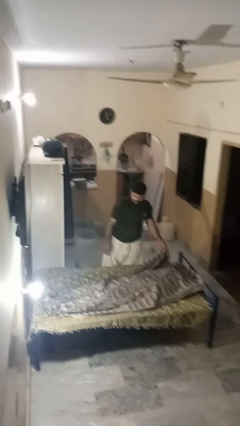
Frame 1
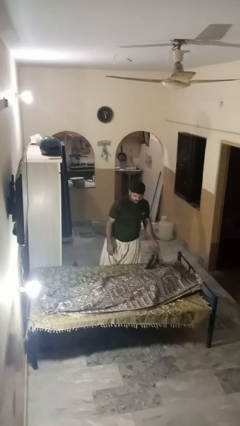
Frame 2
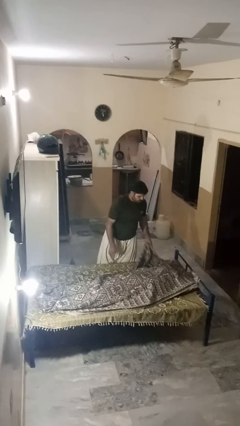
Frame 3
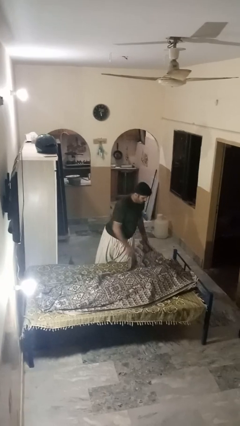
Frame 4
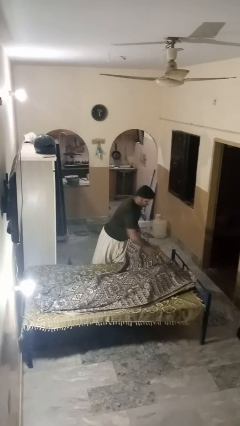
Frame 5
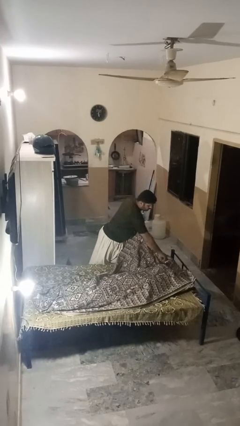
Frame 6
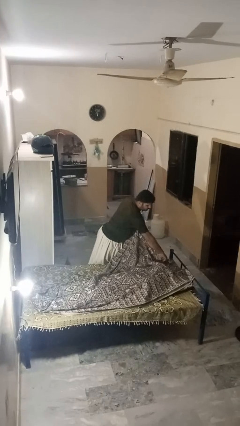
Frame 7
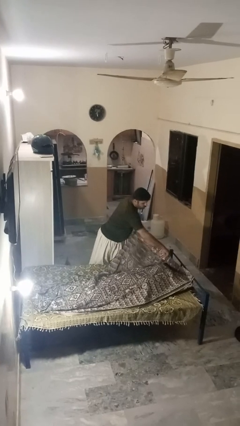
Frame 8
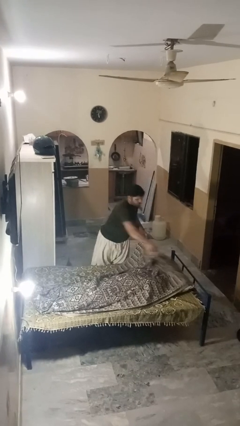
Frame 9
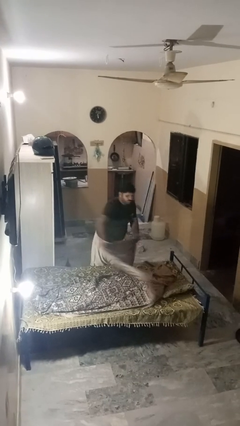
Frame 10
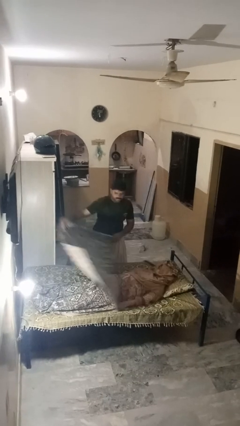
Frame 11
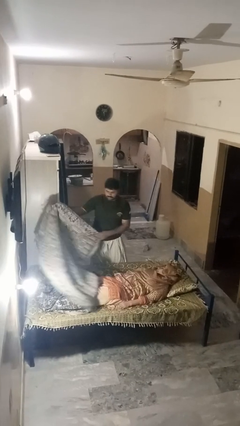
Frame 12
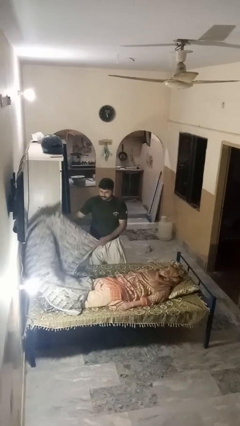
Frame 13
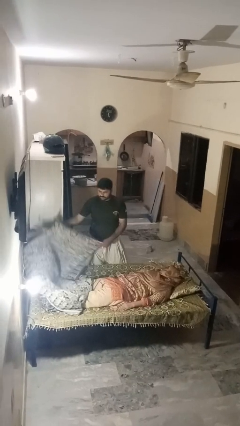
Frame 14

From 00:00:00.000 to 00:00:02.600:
person uncovers friend with blanket

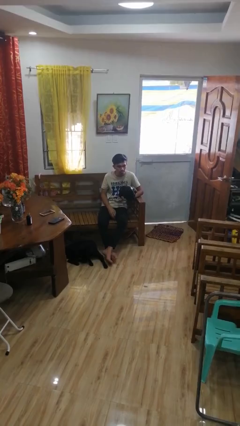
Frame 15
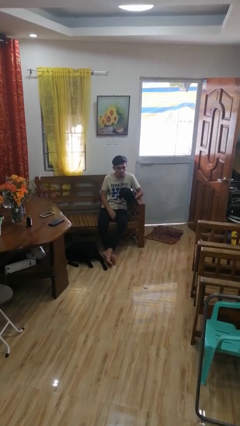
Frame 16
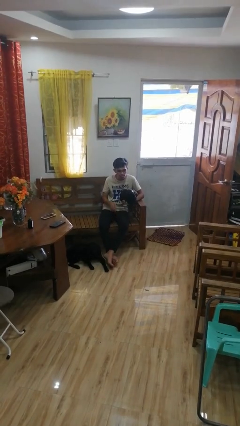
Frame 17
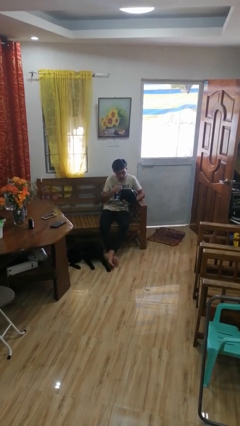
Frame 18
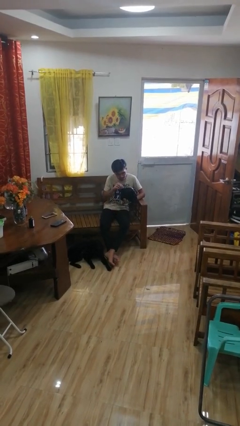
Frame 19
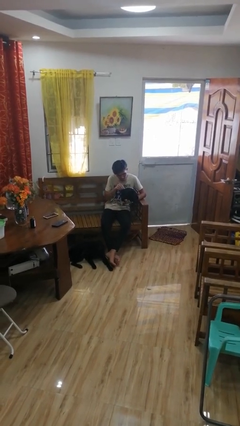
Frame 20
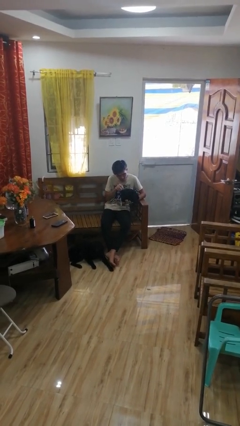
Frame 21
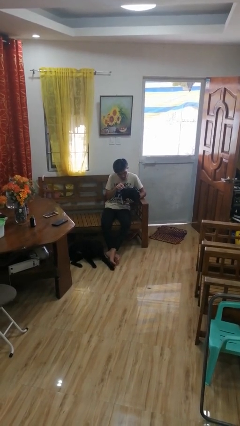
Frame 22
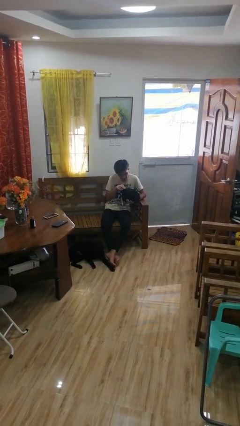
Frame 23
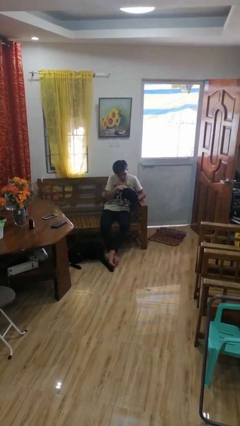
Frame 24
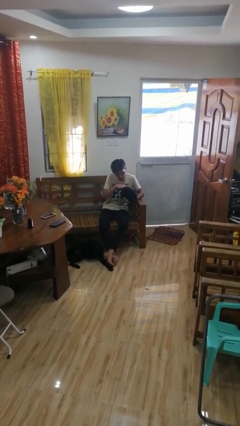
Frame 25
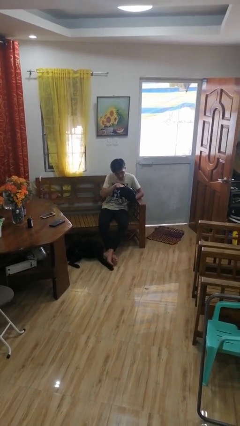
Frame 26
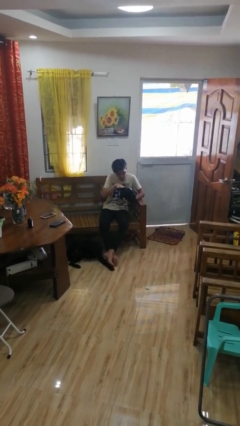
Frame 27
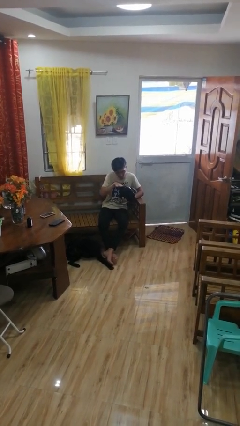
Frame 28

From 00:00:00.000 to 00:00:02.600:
person searches in purse

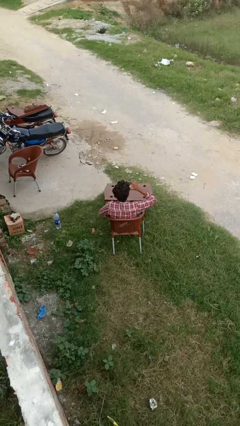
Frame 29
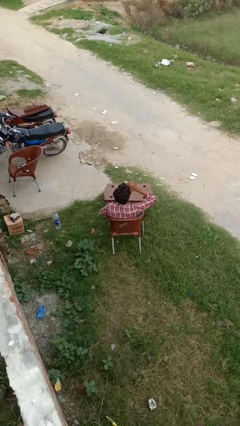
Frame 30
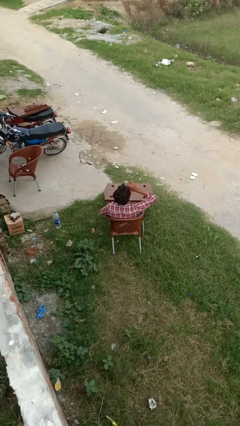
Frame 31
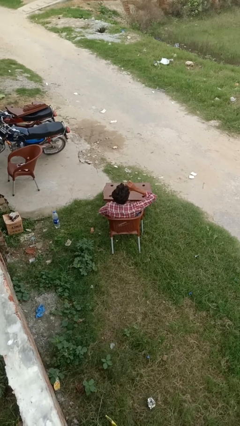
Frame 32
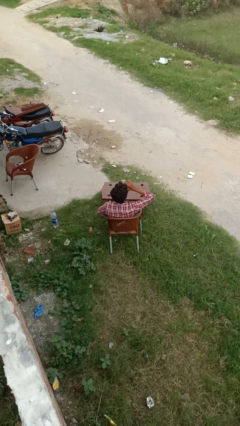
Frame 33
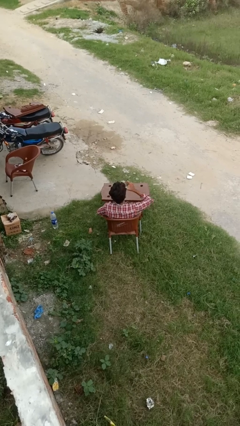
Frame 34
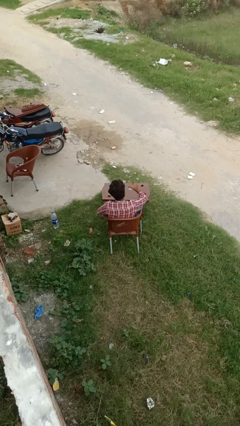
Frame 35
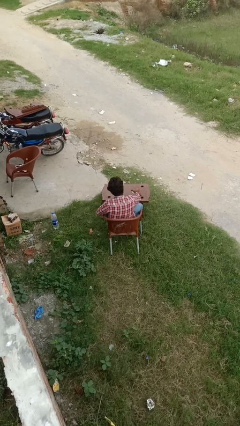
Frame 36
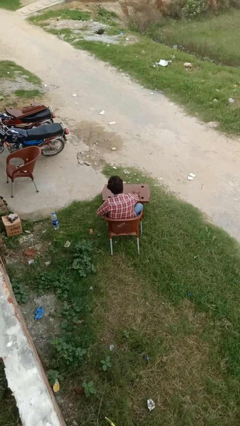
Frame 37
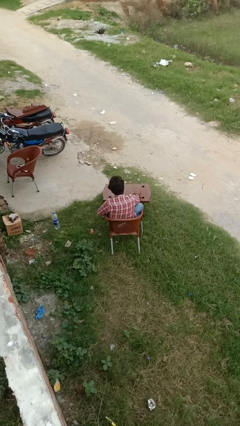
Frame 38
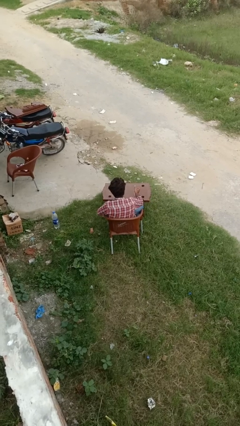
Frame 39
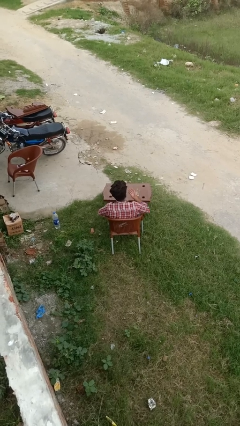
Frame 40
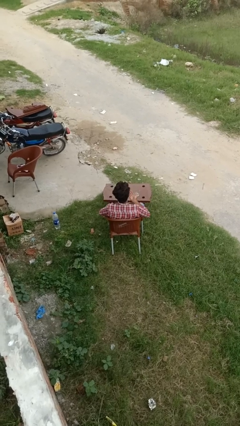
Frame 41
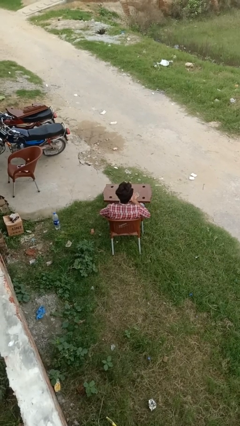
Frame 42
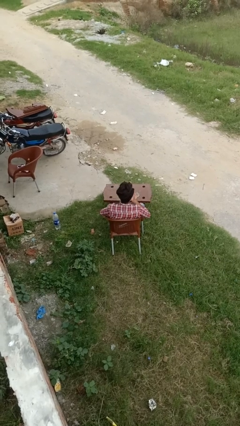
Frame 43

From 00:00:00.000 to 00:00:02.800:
person takes medicine pills

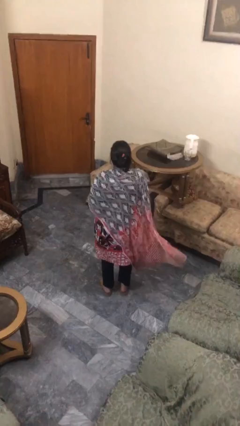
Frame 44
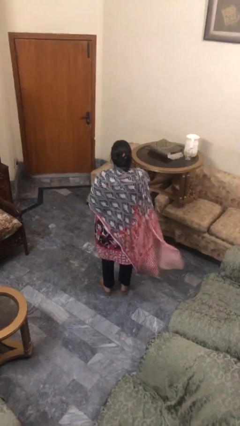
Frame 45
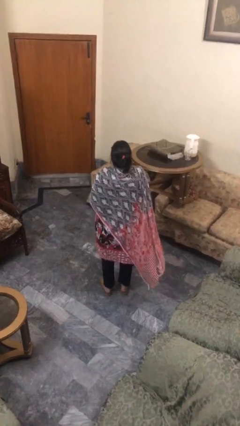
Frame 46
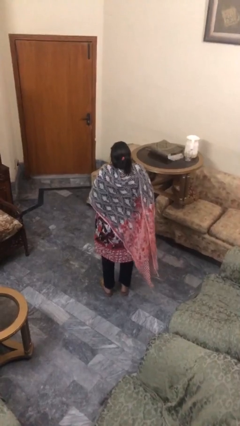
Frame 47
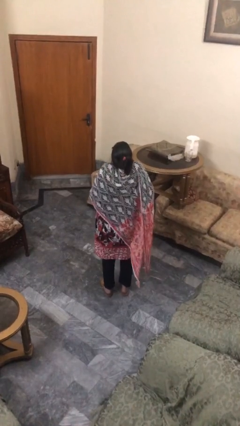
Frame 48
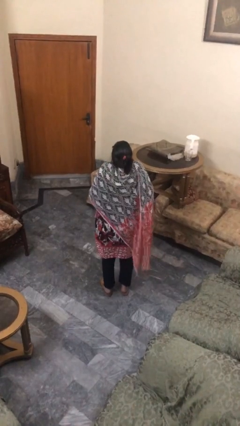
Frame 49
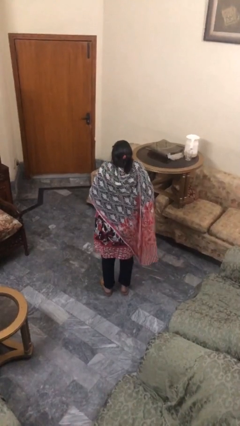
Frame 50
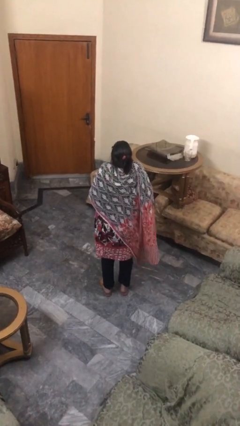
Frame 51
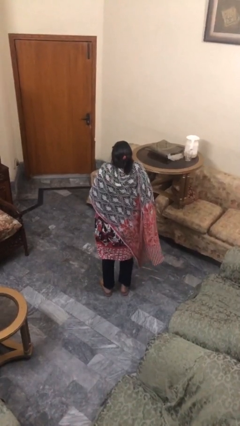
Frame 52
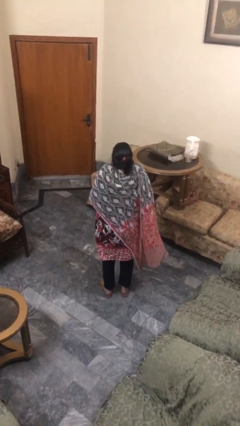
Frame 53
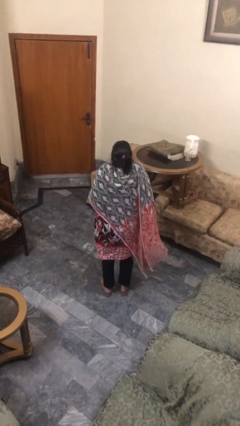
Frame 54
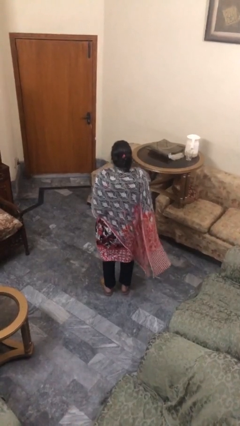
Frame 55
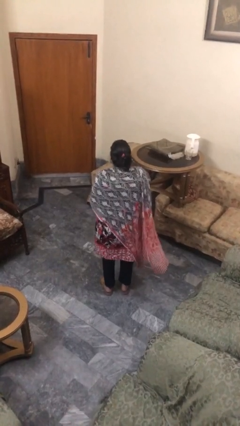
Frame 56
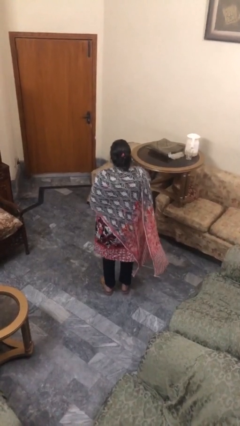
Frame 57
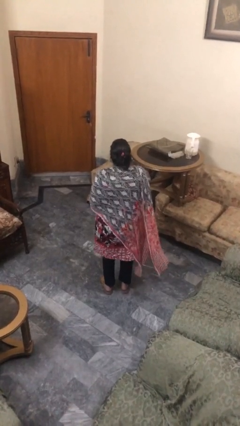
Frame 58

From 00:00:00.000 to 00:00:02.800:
person shrugs

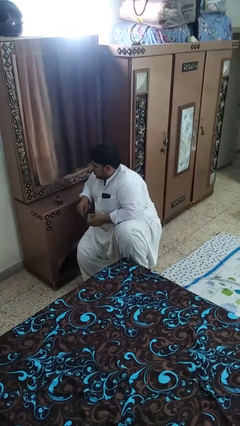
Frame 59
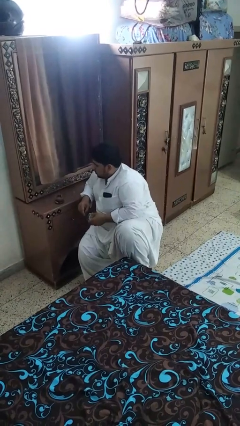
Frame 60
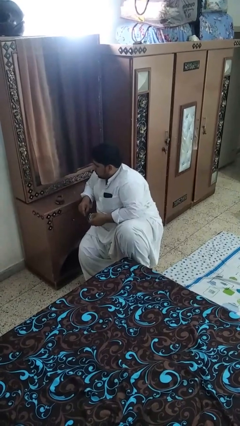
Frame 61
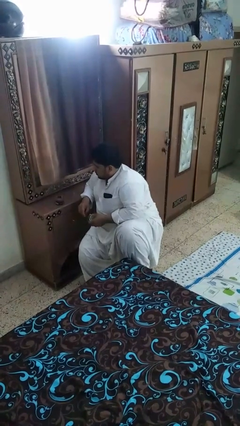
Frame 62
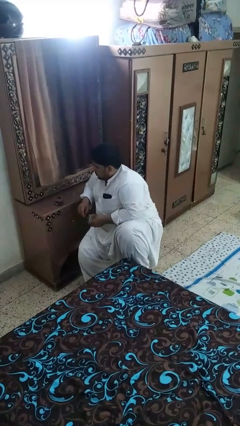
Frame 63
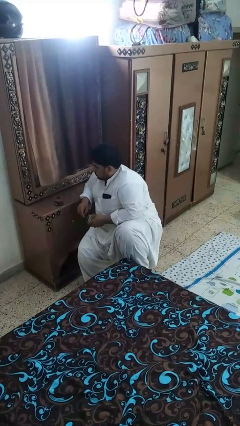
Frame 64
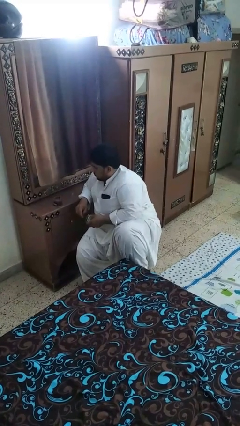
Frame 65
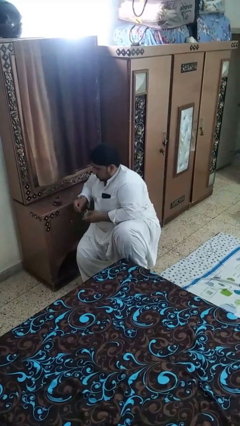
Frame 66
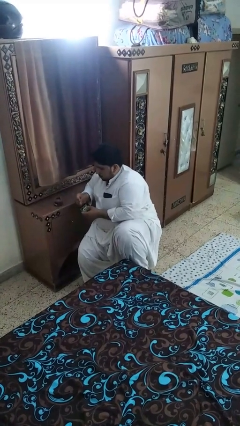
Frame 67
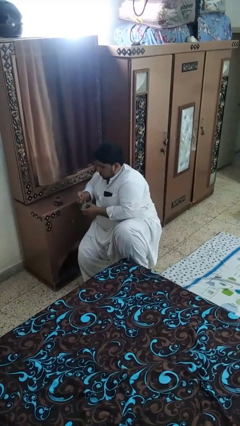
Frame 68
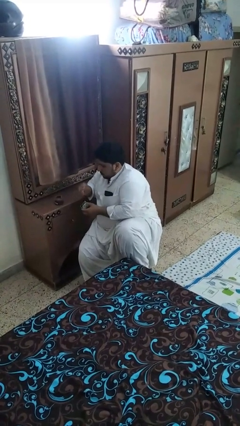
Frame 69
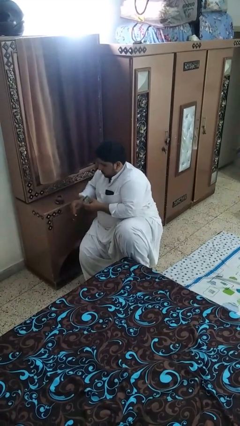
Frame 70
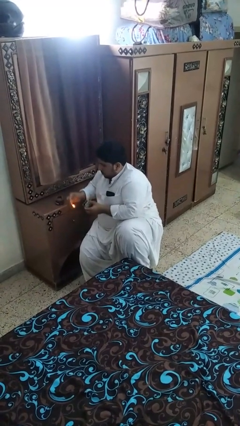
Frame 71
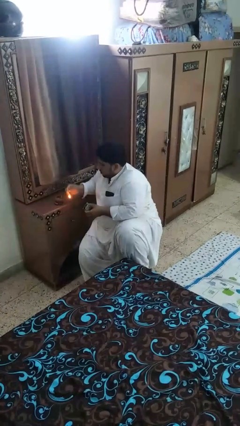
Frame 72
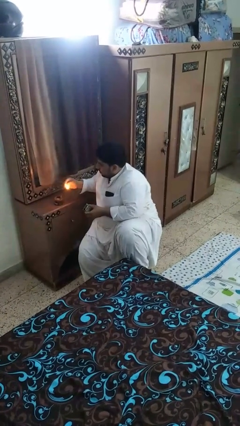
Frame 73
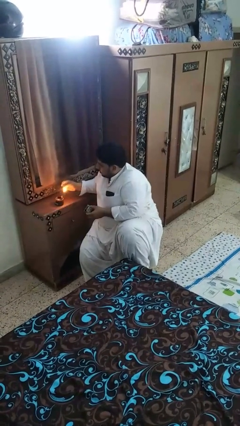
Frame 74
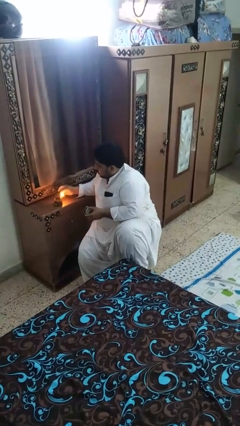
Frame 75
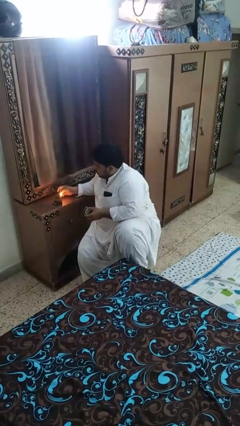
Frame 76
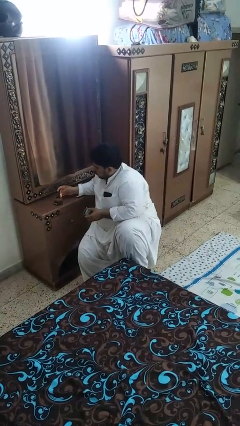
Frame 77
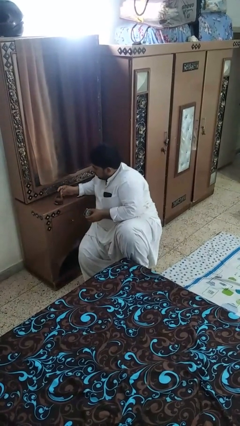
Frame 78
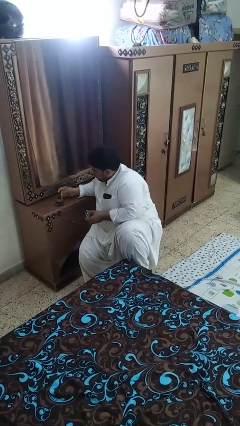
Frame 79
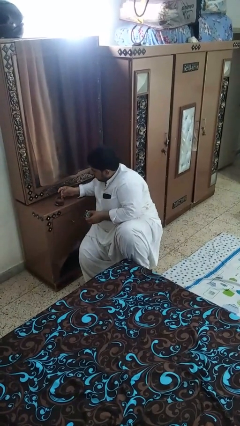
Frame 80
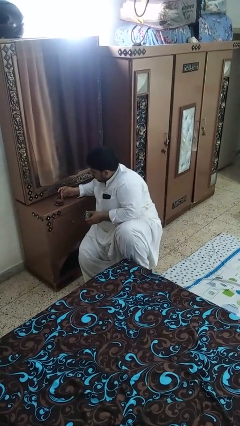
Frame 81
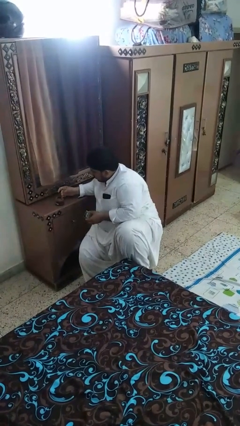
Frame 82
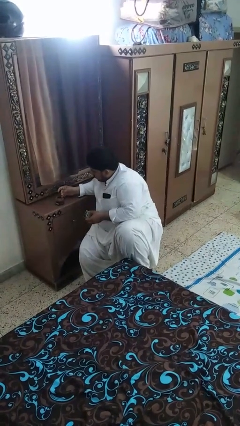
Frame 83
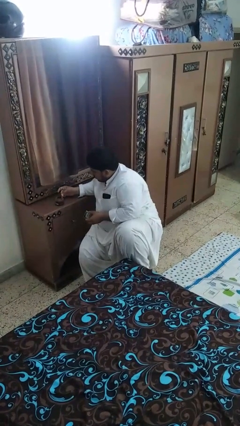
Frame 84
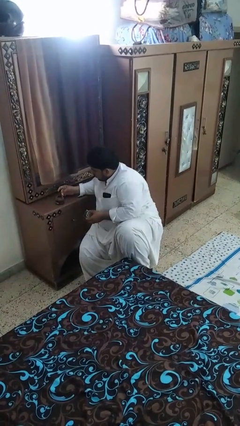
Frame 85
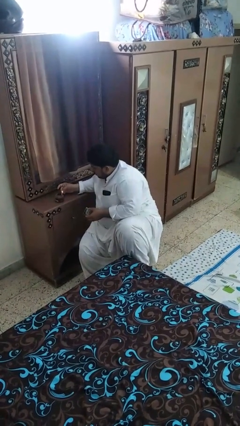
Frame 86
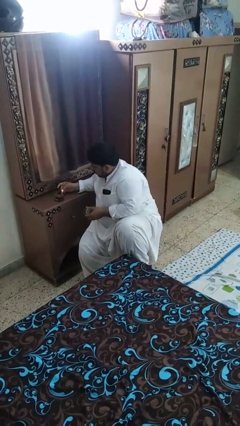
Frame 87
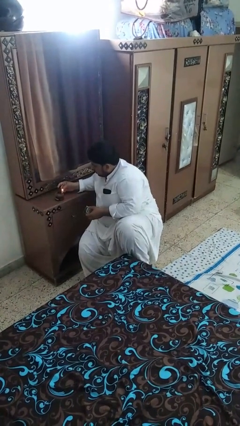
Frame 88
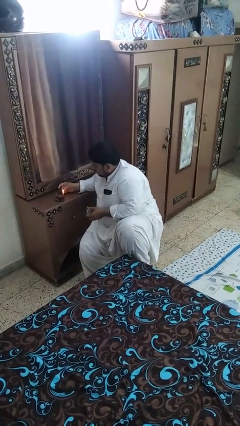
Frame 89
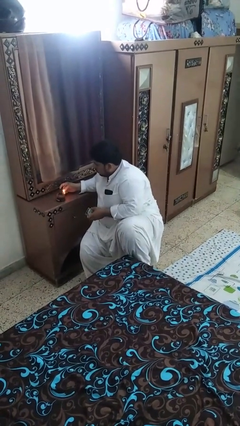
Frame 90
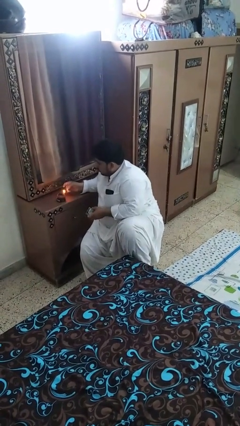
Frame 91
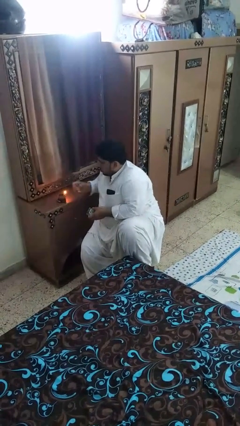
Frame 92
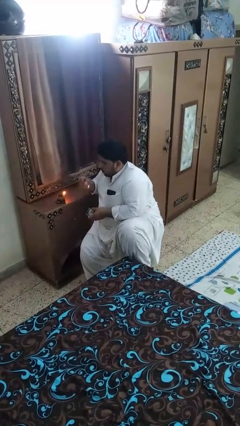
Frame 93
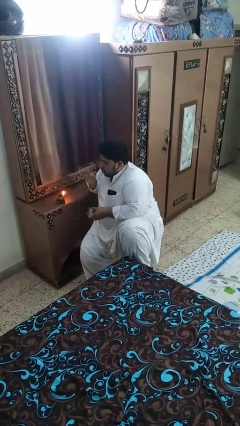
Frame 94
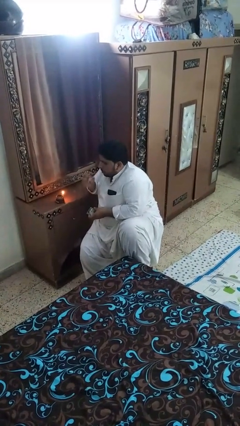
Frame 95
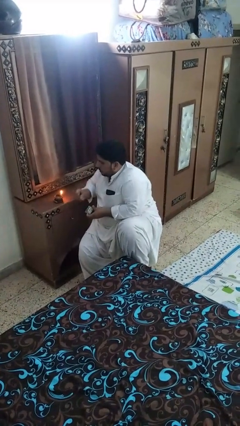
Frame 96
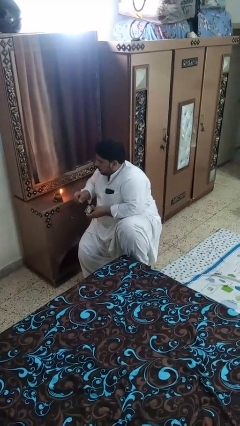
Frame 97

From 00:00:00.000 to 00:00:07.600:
person lights candle
